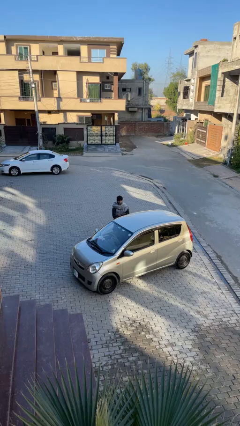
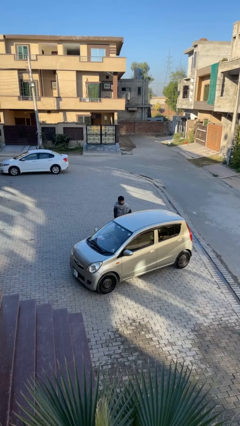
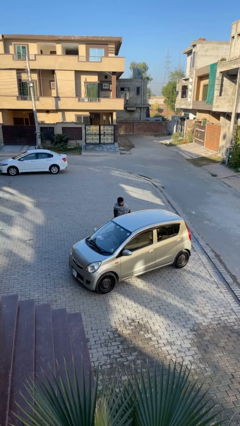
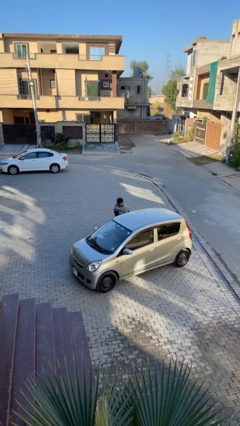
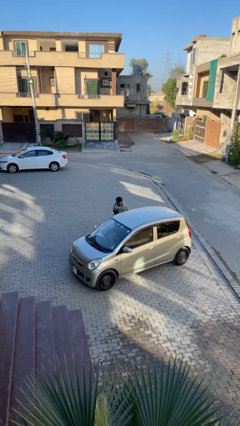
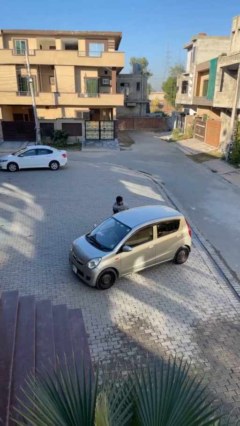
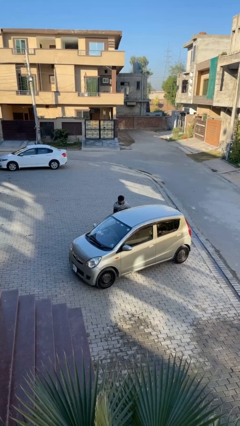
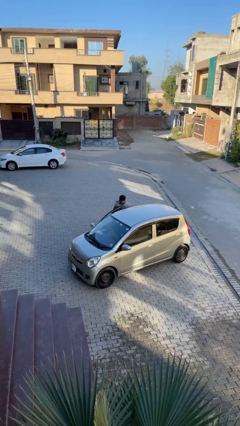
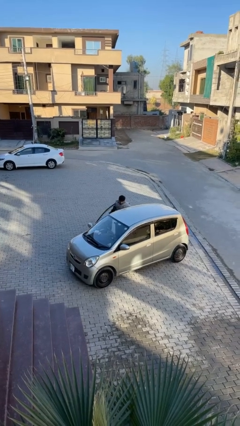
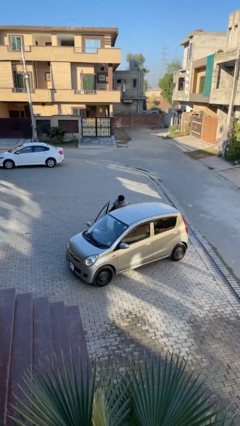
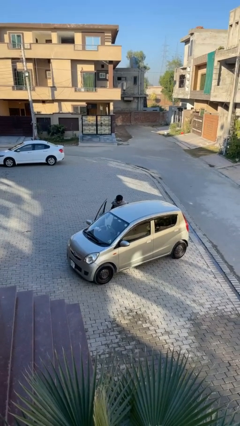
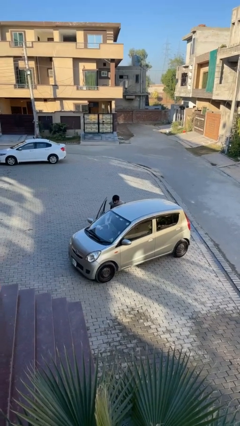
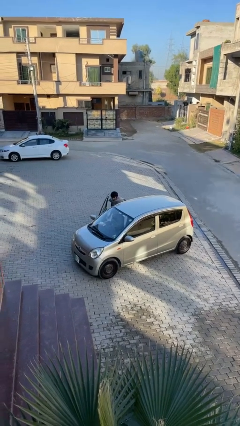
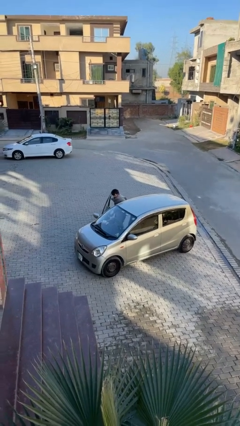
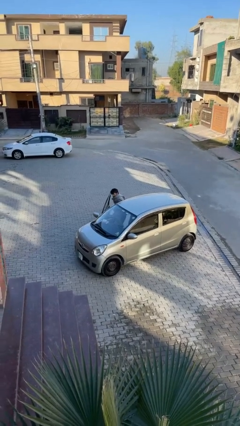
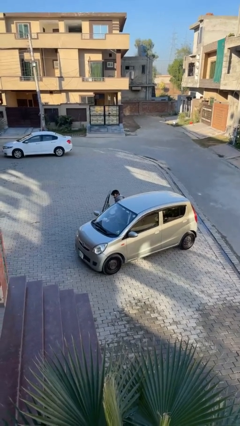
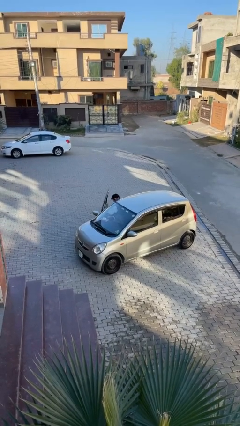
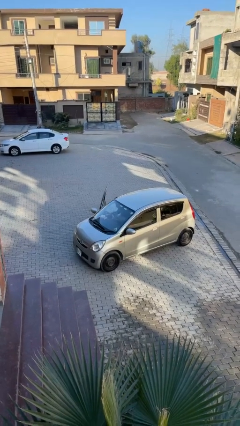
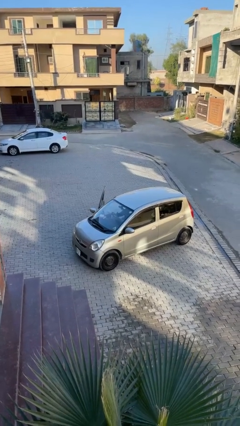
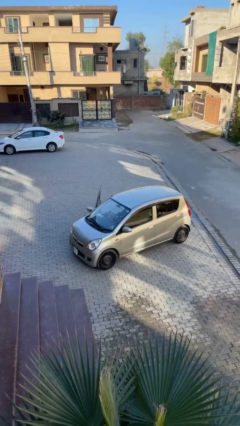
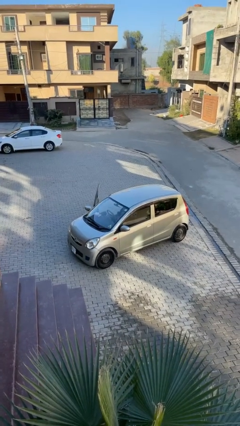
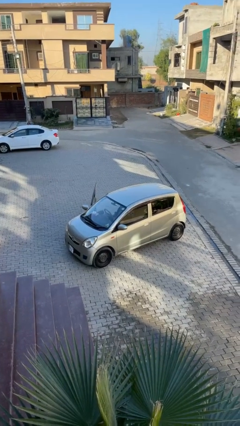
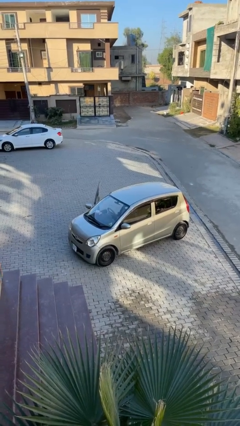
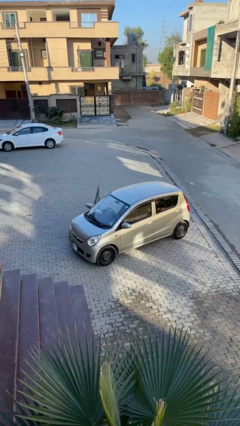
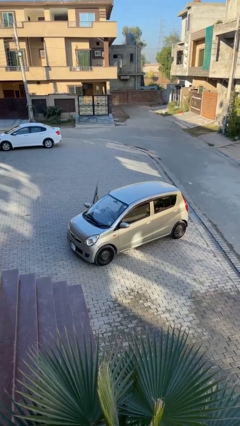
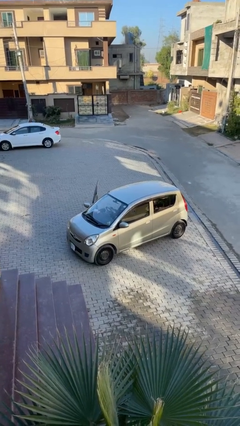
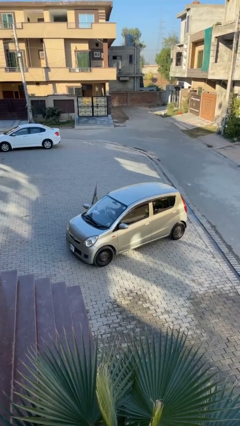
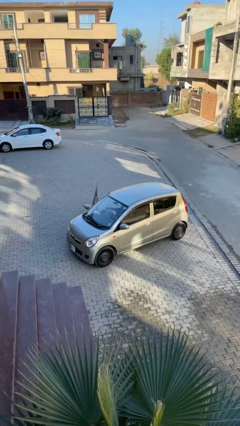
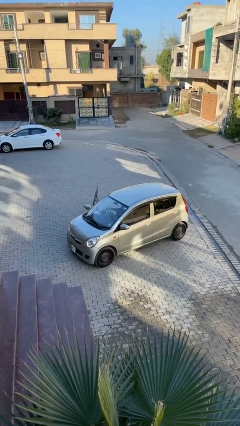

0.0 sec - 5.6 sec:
person enters car

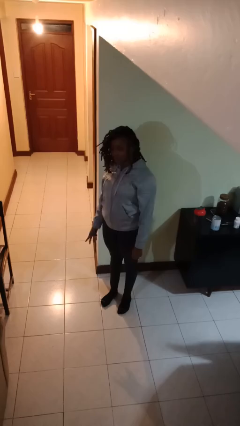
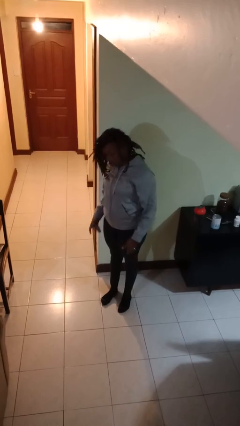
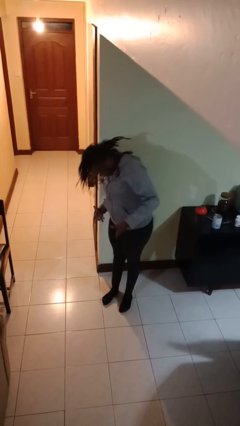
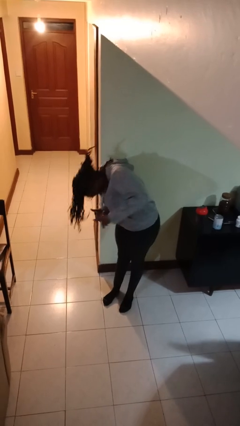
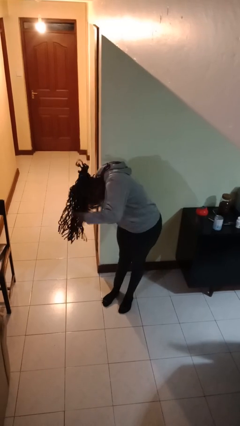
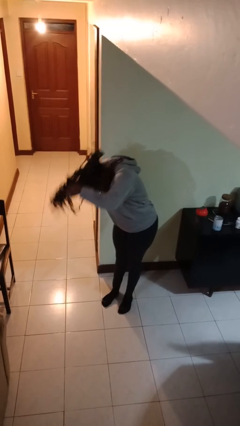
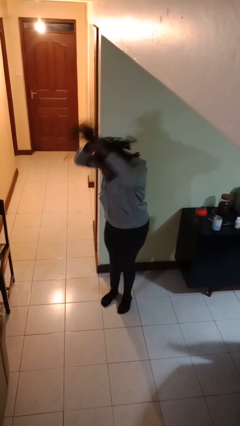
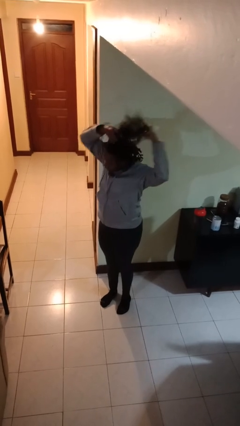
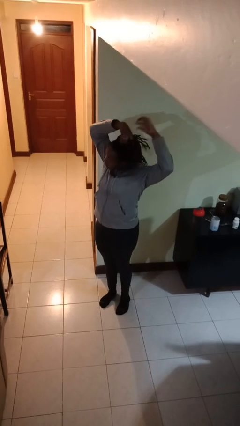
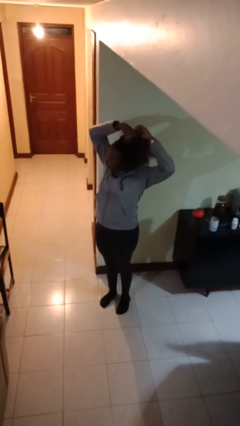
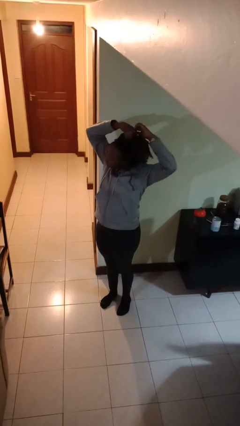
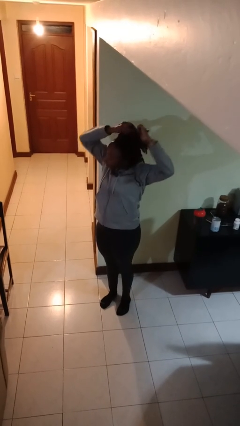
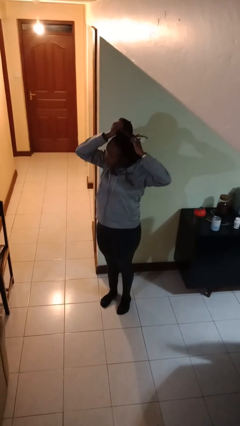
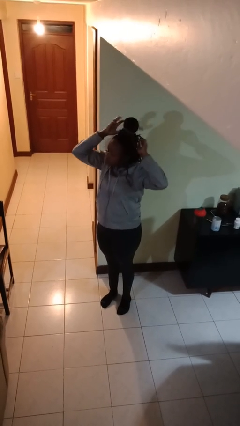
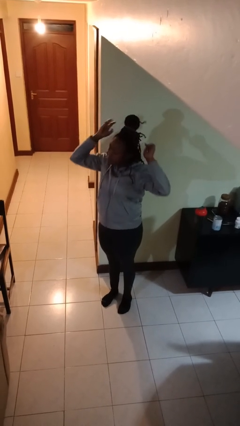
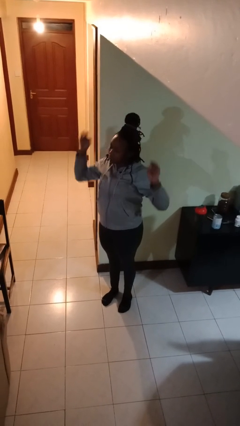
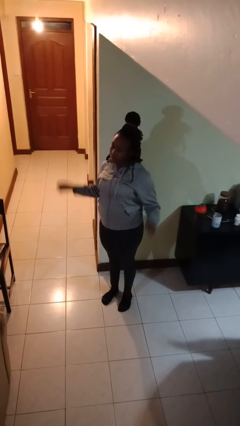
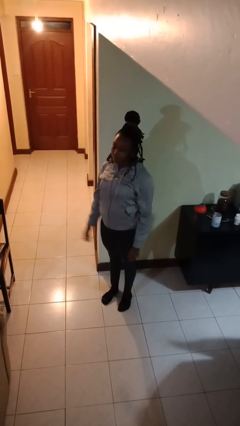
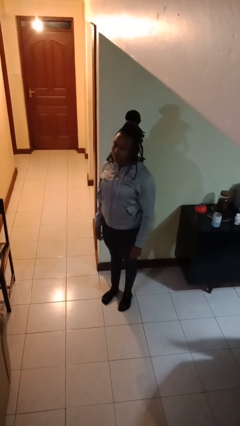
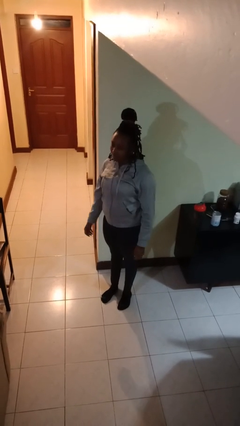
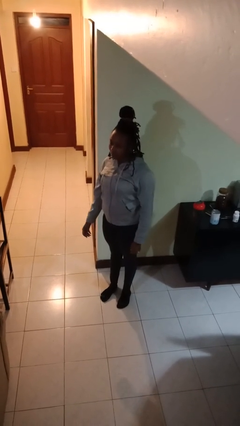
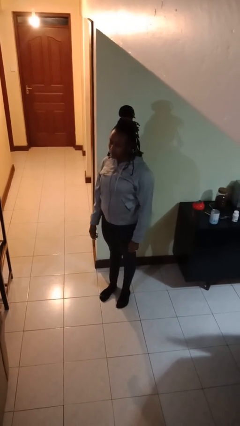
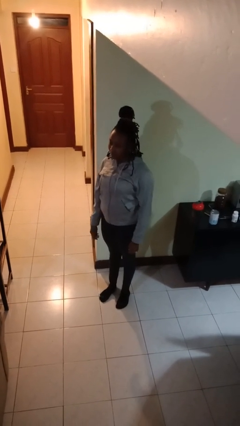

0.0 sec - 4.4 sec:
person puts hair in ponytail

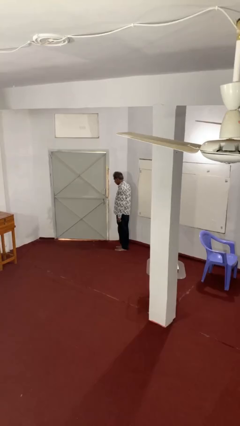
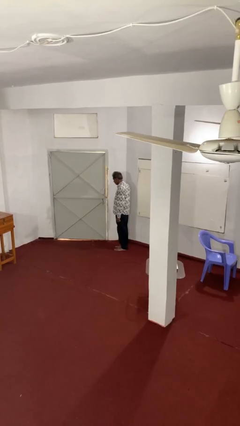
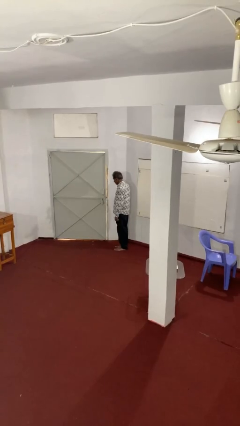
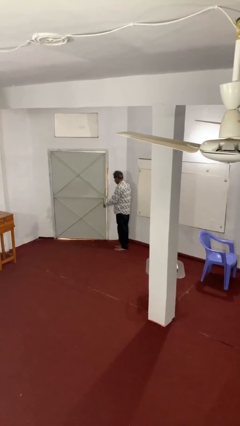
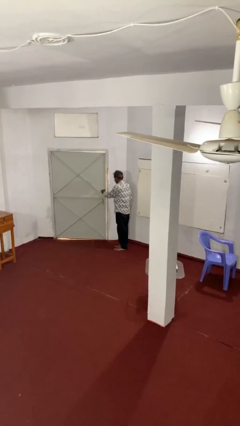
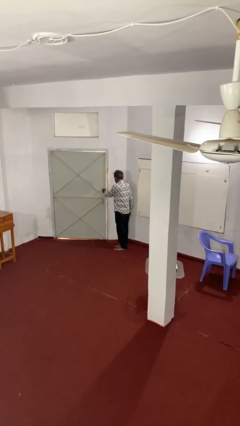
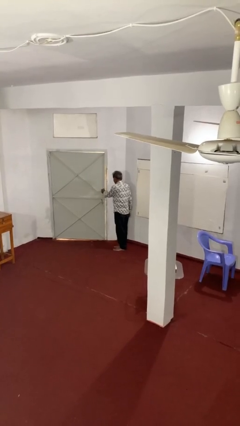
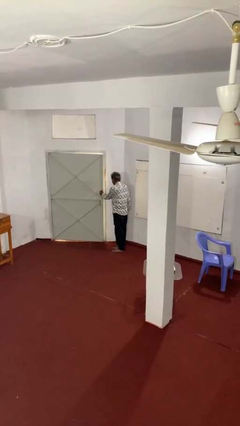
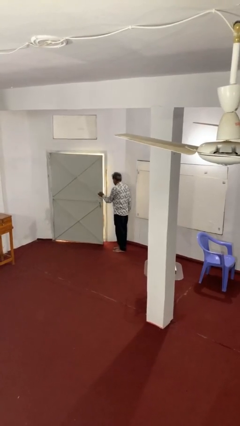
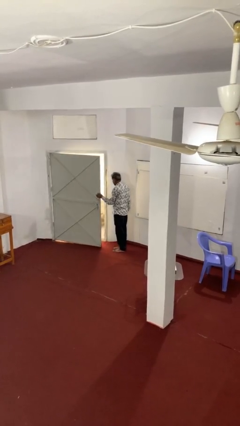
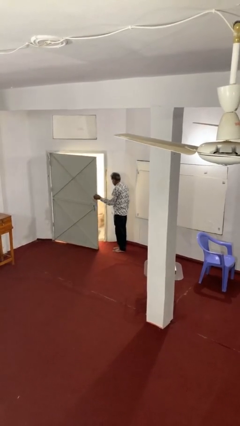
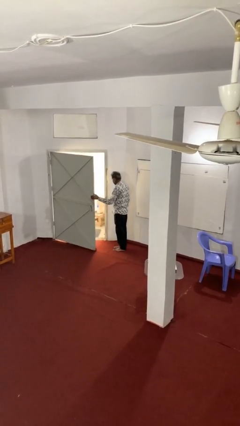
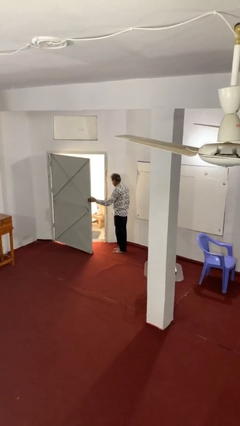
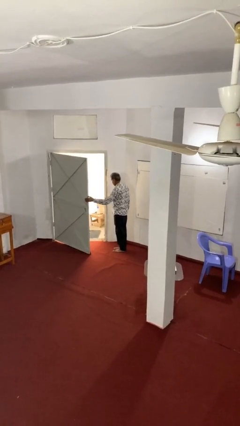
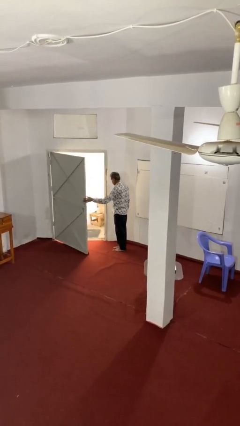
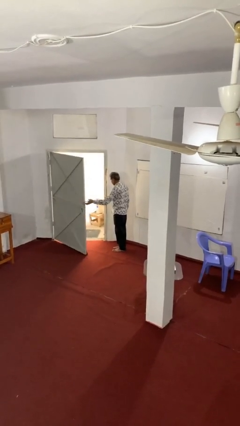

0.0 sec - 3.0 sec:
person opens facility door

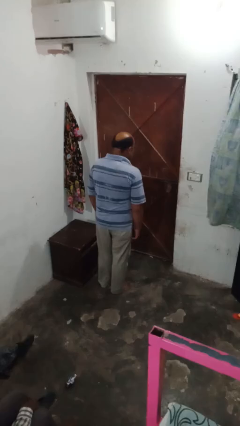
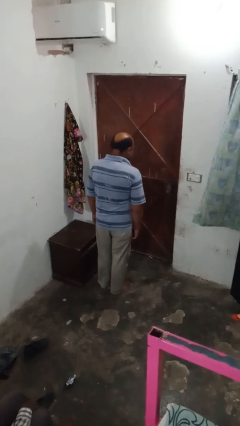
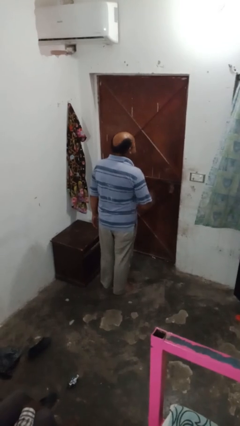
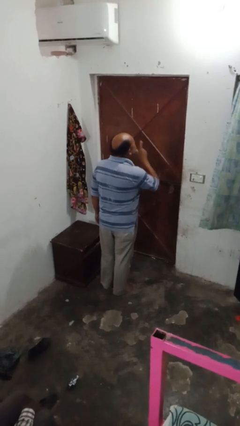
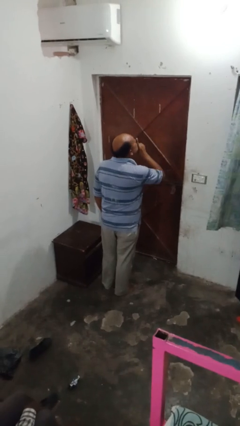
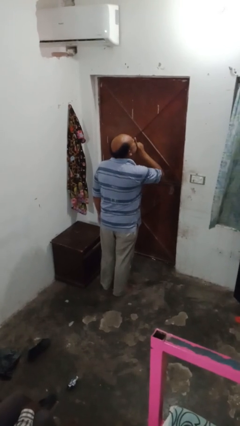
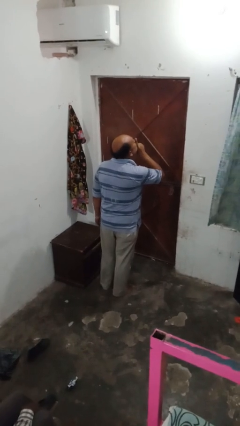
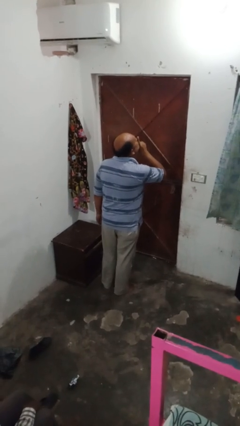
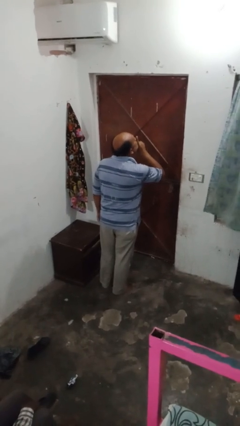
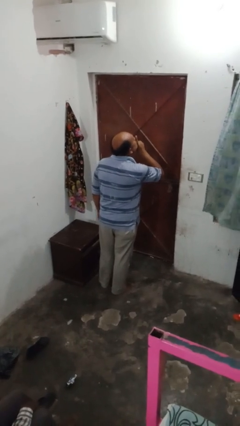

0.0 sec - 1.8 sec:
person gestures be quiet

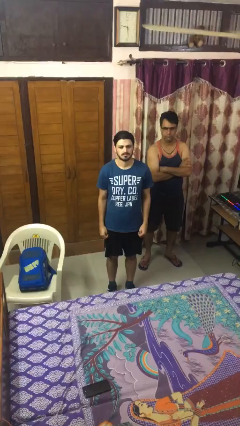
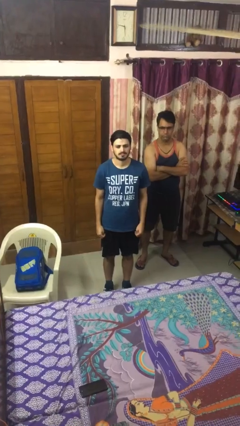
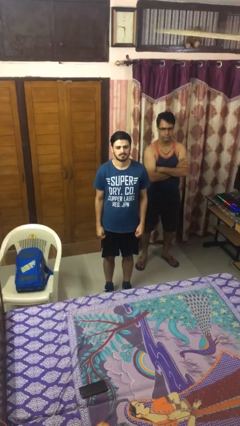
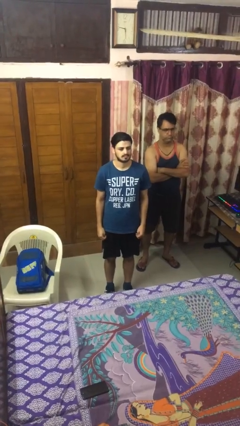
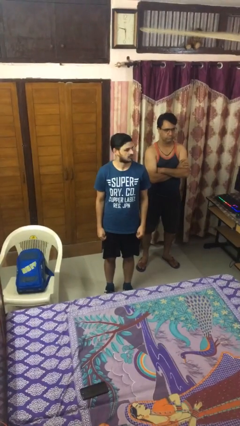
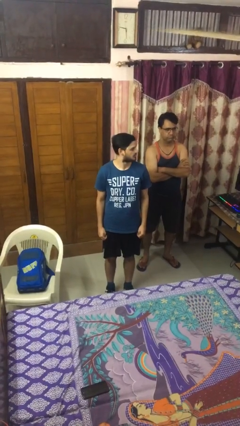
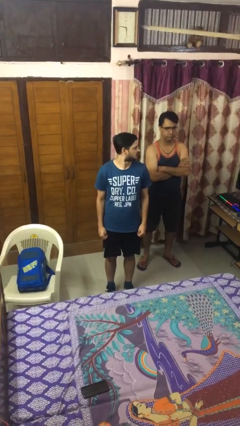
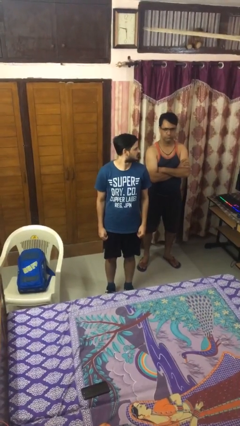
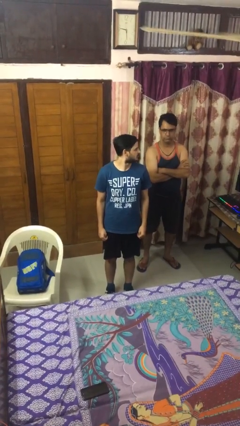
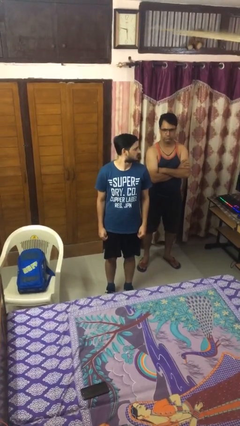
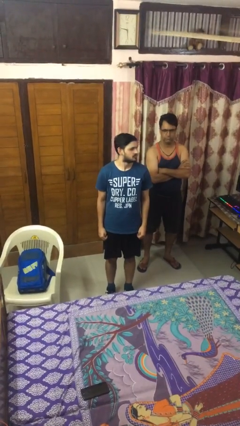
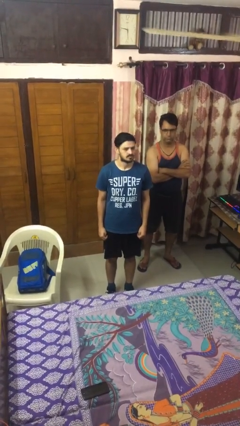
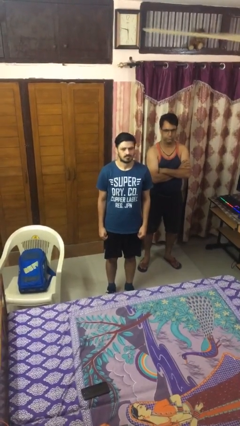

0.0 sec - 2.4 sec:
person looks over shoulder

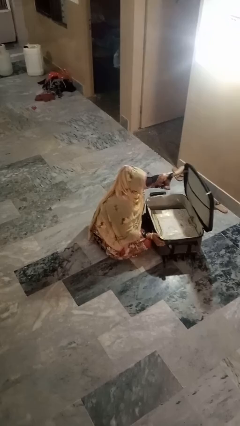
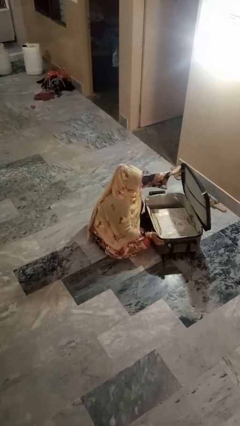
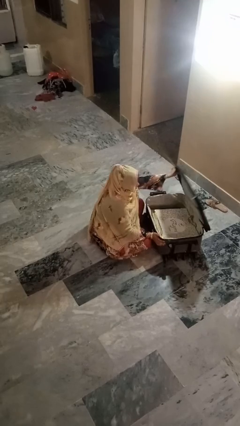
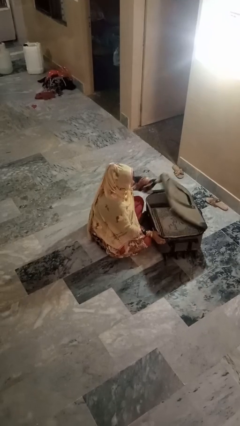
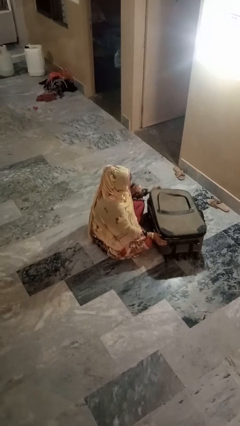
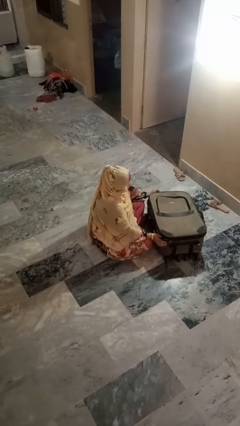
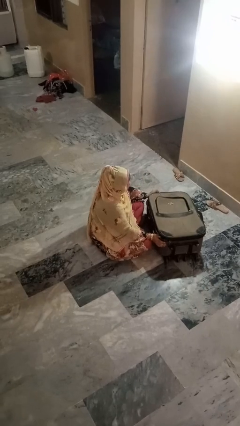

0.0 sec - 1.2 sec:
person closes suitcase
